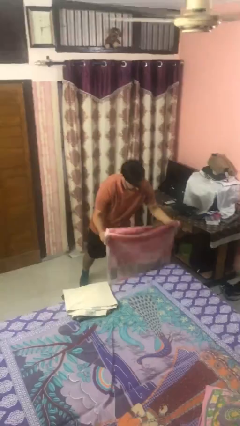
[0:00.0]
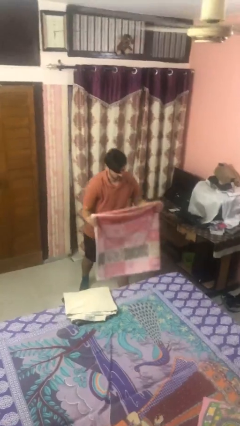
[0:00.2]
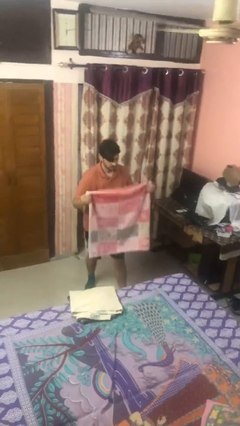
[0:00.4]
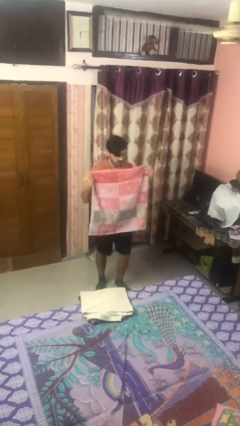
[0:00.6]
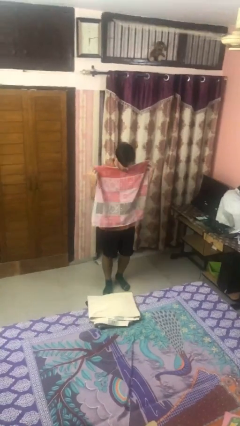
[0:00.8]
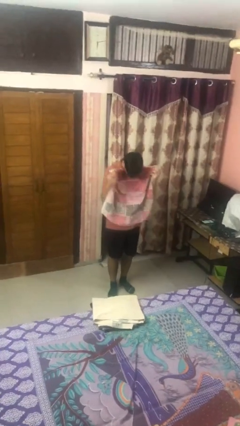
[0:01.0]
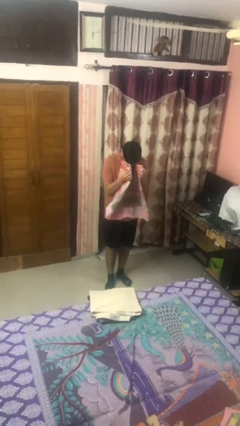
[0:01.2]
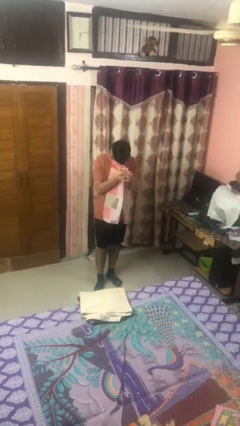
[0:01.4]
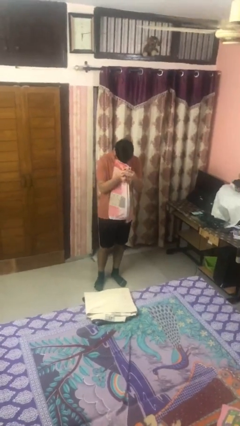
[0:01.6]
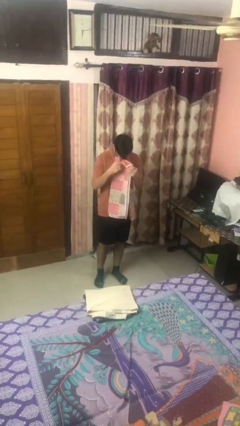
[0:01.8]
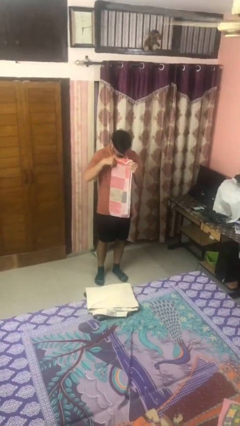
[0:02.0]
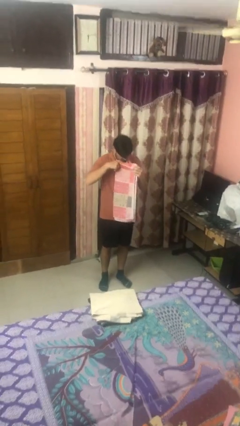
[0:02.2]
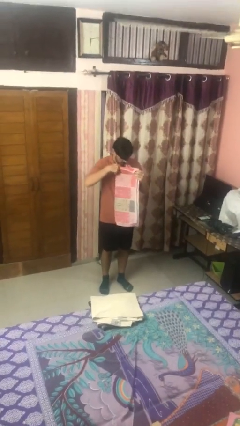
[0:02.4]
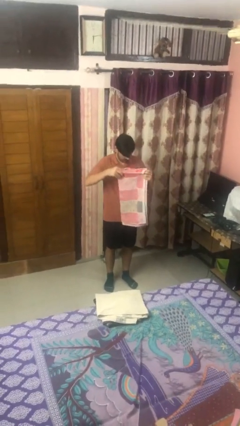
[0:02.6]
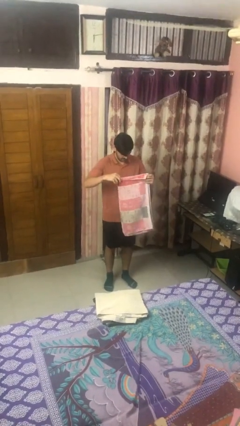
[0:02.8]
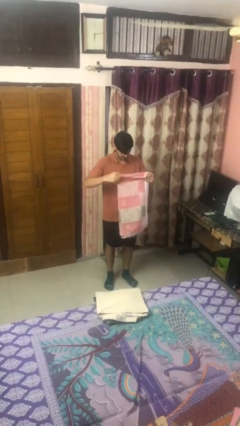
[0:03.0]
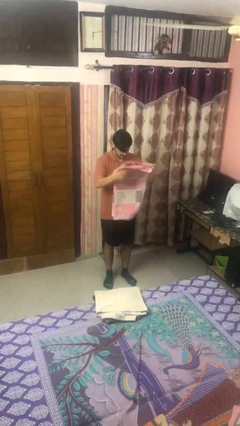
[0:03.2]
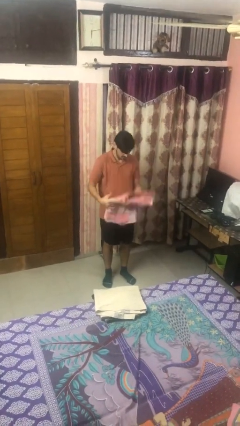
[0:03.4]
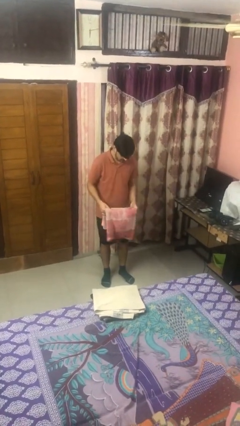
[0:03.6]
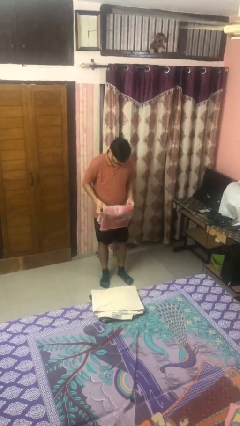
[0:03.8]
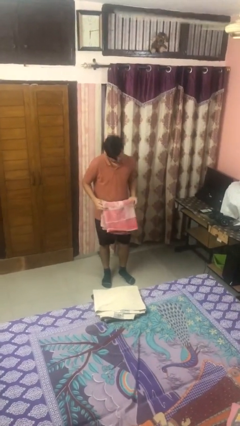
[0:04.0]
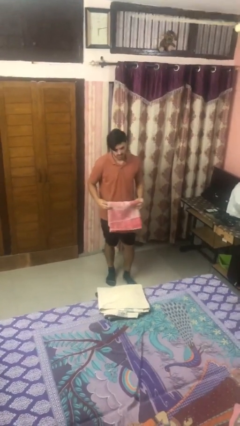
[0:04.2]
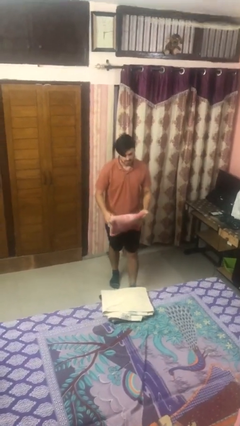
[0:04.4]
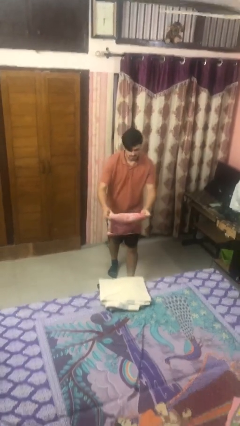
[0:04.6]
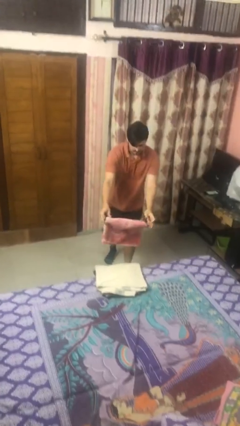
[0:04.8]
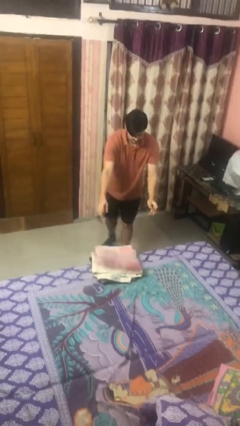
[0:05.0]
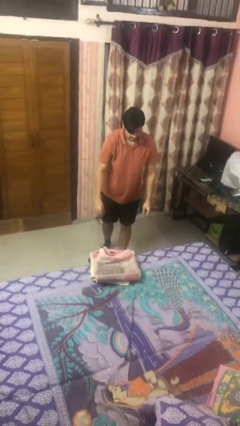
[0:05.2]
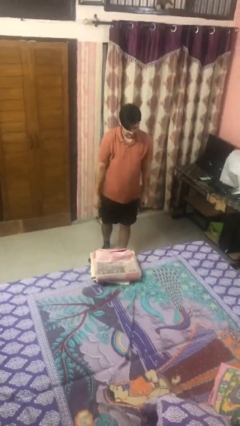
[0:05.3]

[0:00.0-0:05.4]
person folds towel

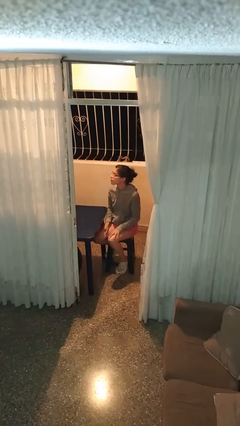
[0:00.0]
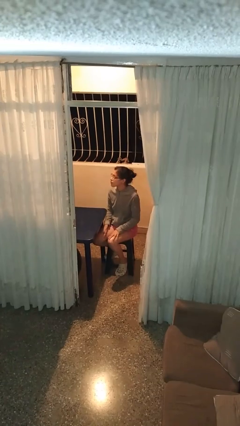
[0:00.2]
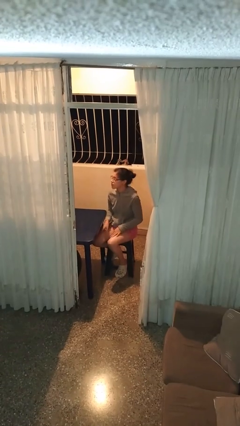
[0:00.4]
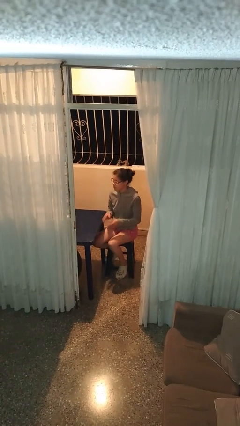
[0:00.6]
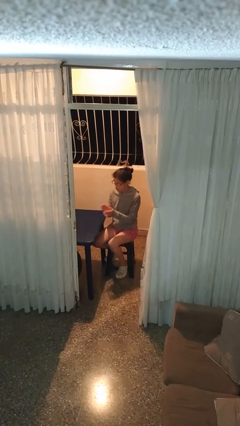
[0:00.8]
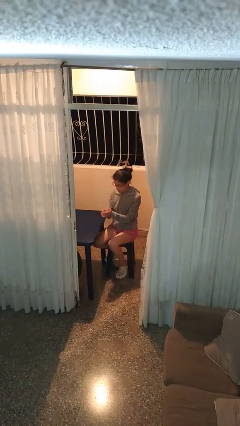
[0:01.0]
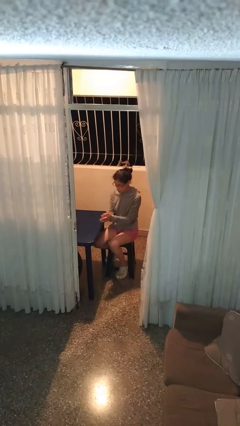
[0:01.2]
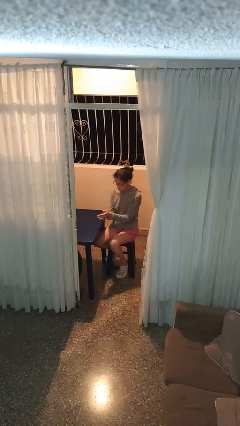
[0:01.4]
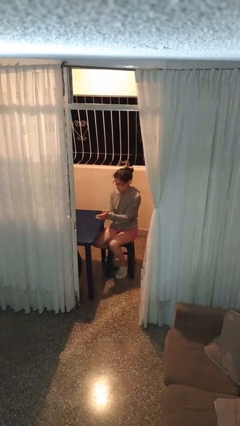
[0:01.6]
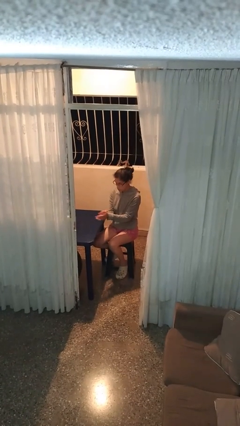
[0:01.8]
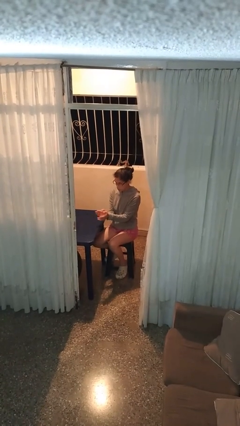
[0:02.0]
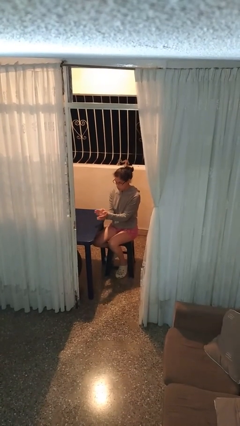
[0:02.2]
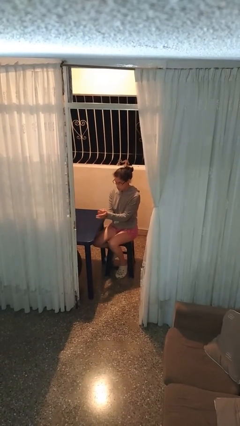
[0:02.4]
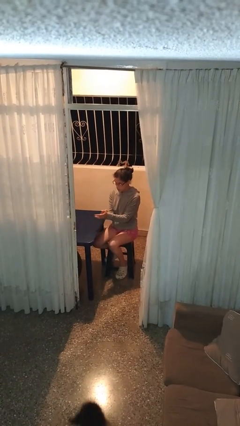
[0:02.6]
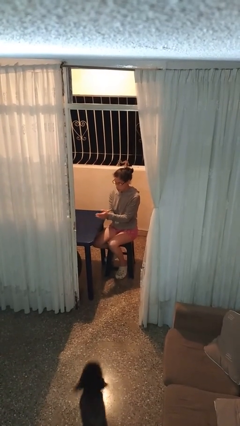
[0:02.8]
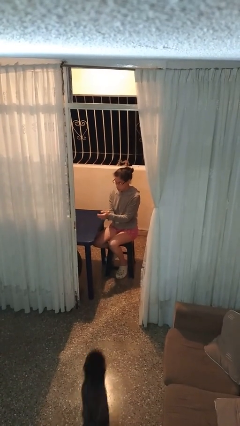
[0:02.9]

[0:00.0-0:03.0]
person claps hands

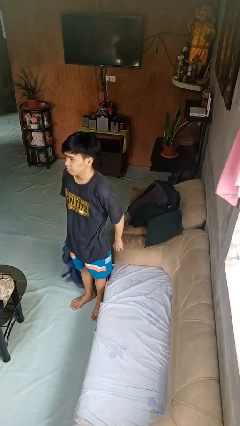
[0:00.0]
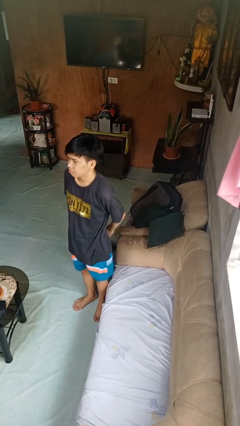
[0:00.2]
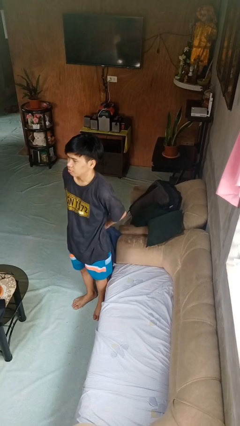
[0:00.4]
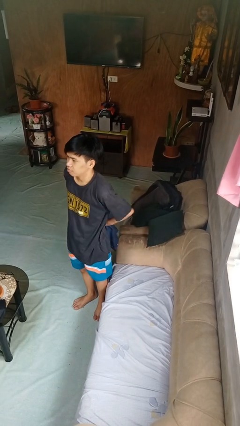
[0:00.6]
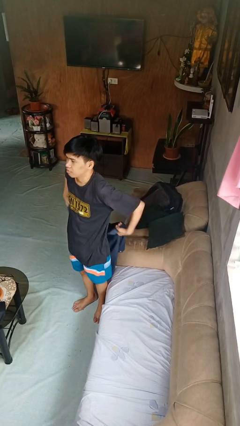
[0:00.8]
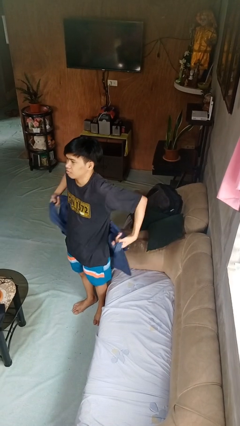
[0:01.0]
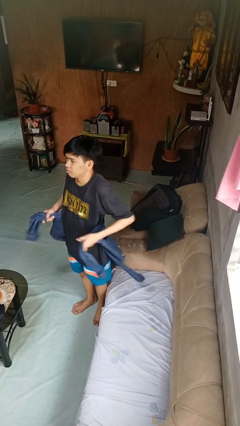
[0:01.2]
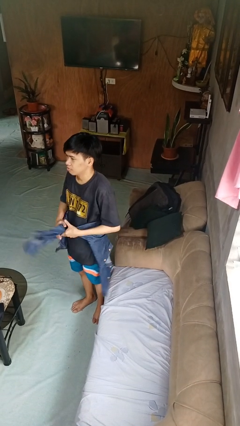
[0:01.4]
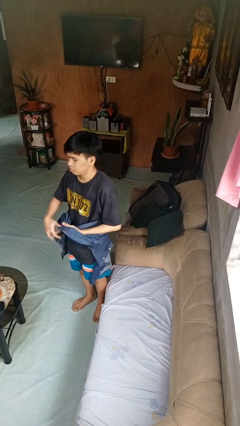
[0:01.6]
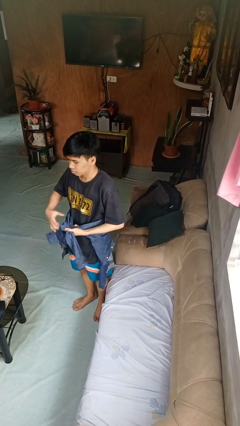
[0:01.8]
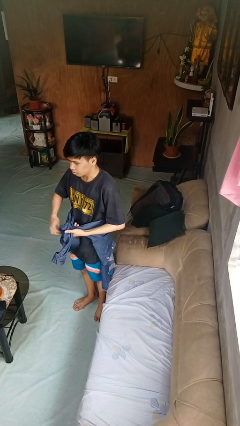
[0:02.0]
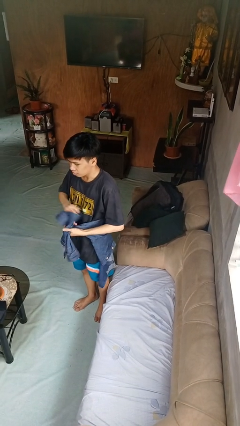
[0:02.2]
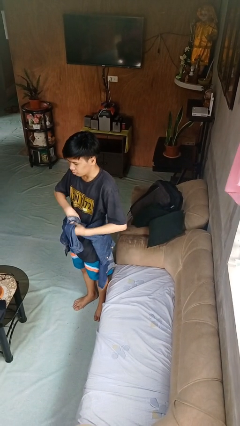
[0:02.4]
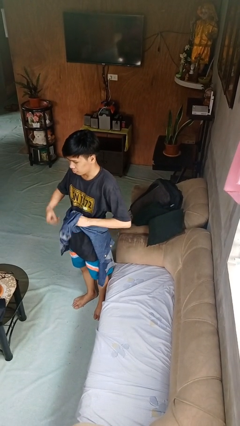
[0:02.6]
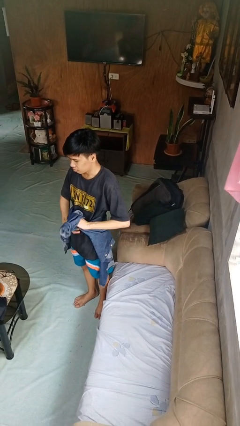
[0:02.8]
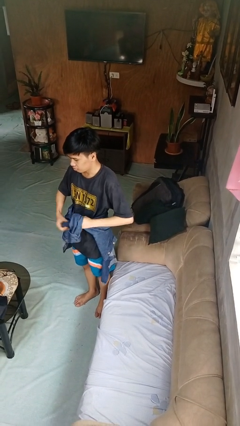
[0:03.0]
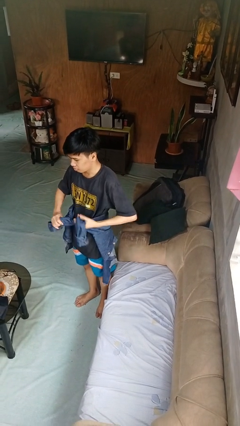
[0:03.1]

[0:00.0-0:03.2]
person ties jacket around waist

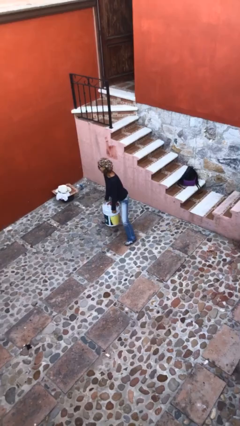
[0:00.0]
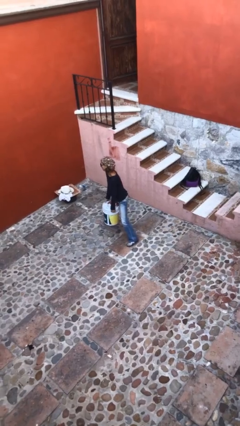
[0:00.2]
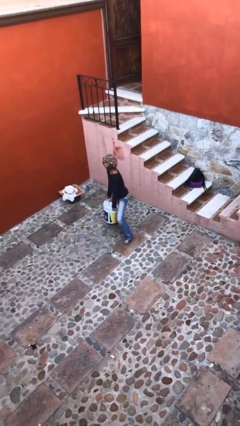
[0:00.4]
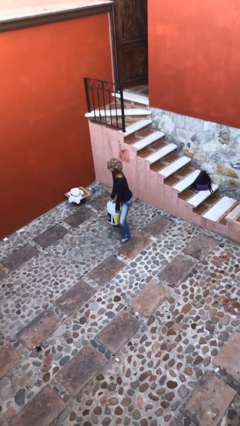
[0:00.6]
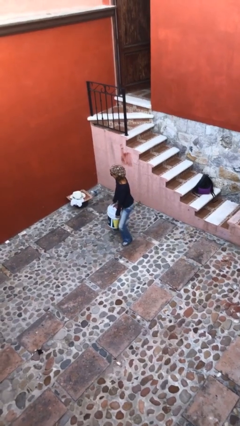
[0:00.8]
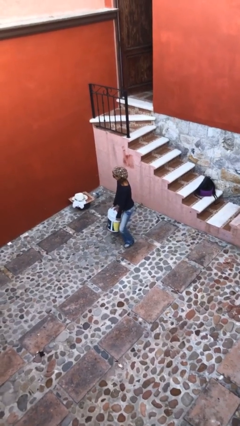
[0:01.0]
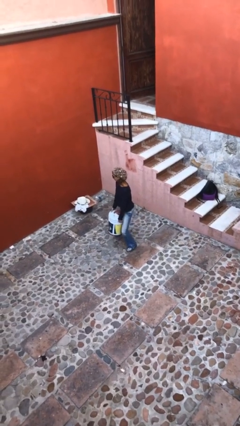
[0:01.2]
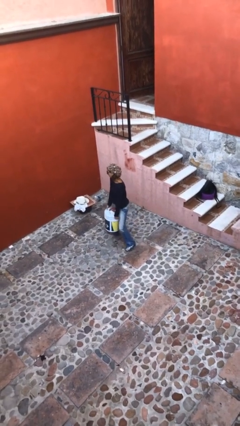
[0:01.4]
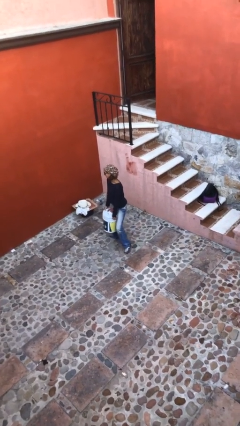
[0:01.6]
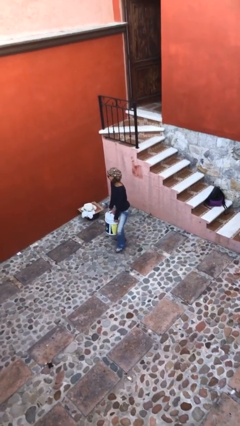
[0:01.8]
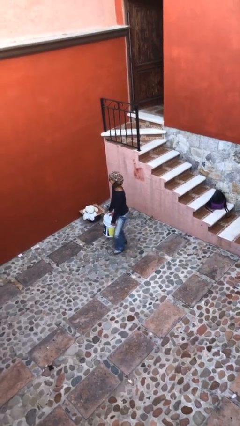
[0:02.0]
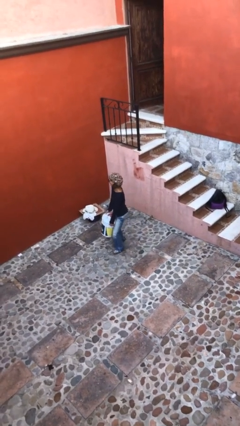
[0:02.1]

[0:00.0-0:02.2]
person carries heavy object

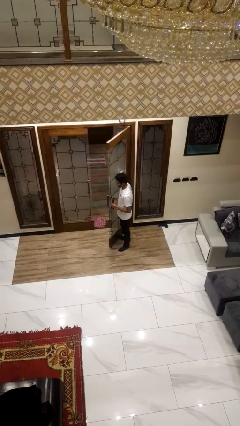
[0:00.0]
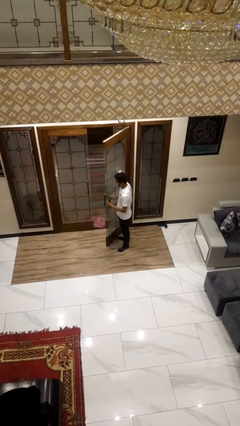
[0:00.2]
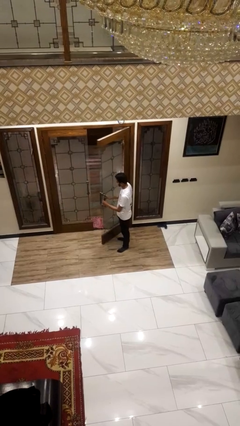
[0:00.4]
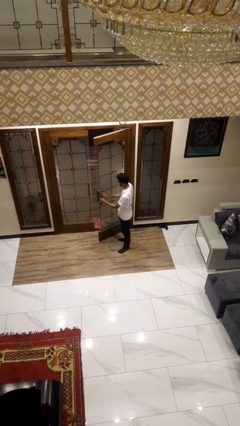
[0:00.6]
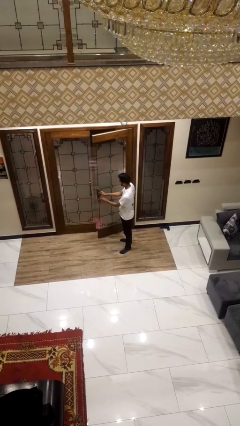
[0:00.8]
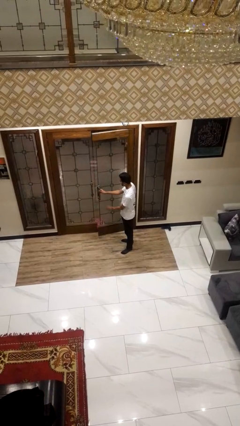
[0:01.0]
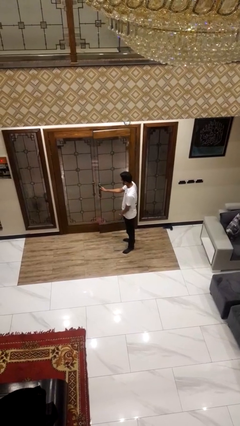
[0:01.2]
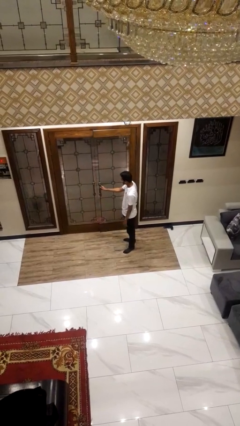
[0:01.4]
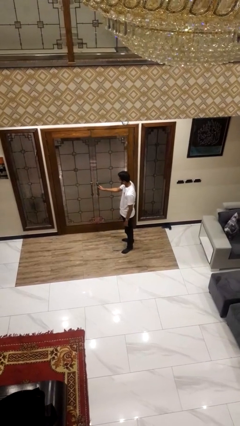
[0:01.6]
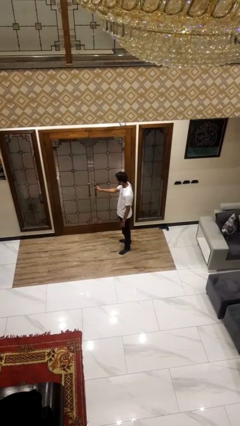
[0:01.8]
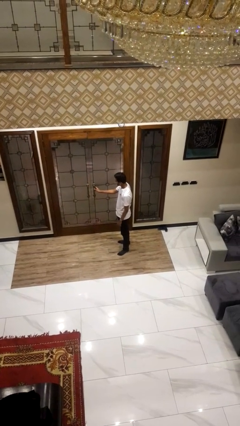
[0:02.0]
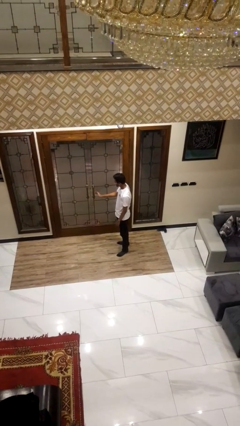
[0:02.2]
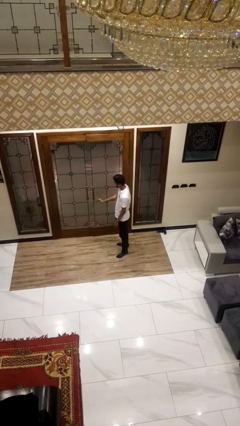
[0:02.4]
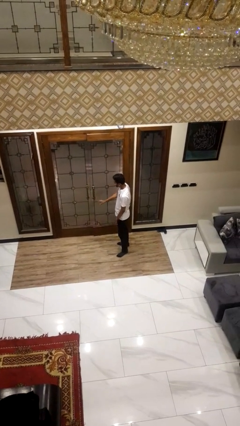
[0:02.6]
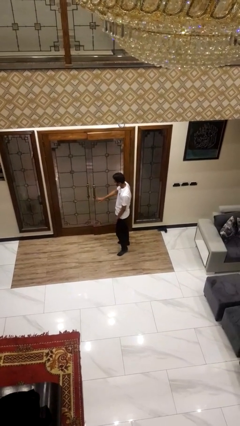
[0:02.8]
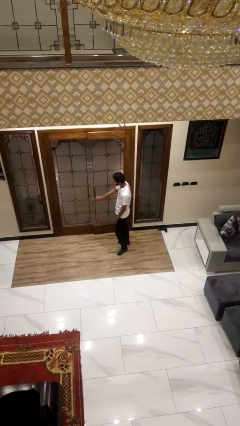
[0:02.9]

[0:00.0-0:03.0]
person closes facility door

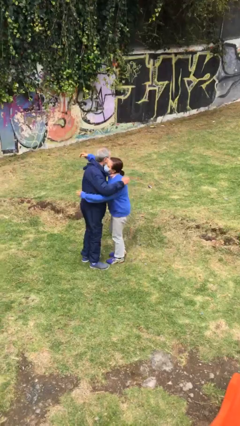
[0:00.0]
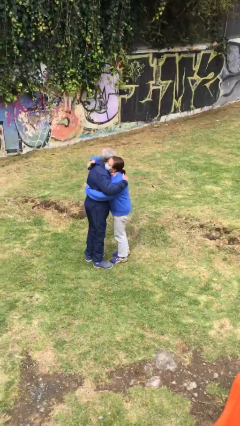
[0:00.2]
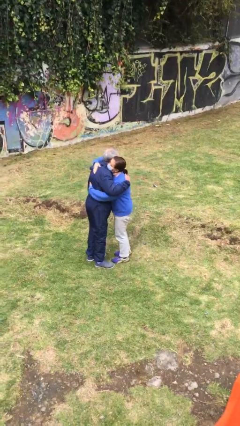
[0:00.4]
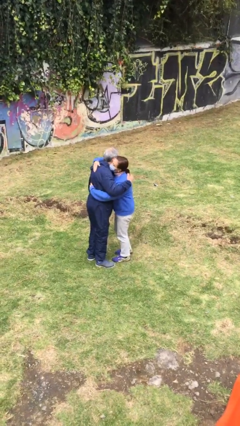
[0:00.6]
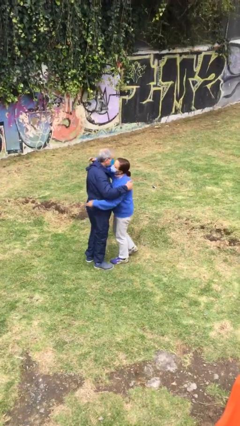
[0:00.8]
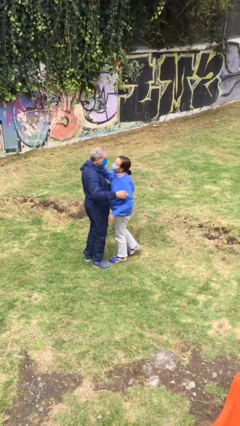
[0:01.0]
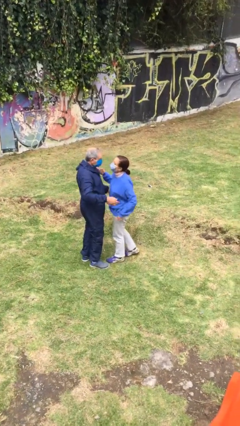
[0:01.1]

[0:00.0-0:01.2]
person embraces person
